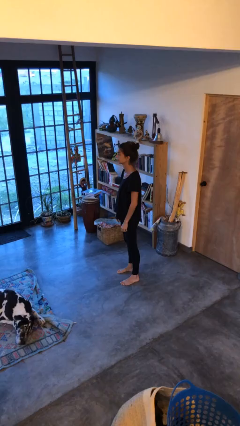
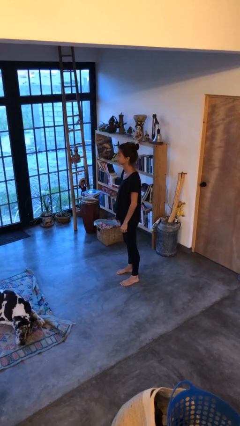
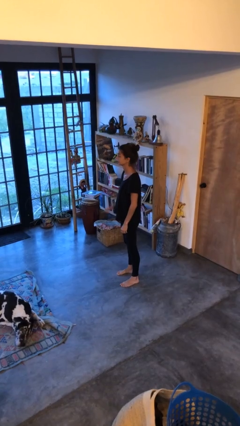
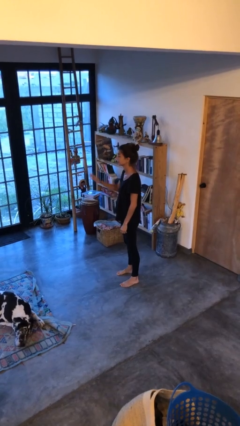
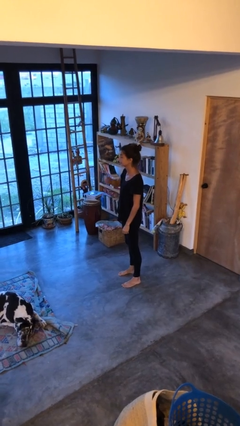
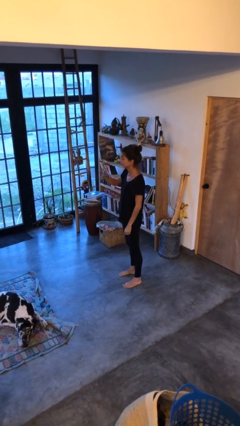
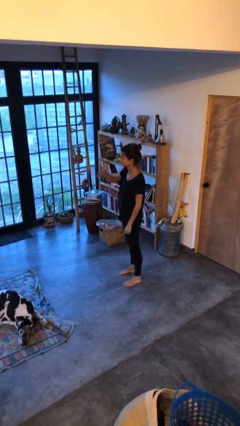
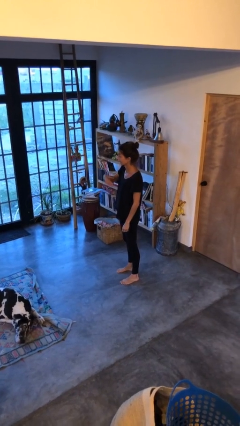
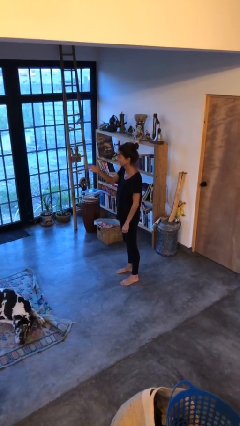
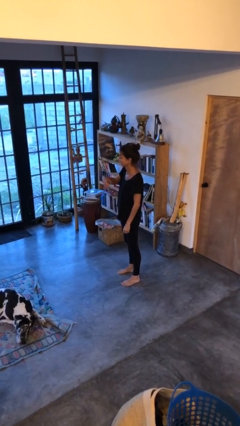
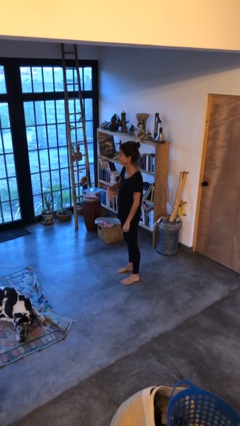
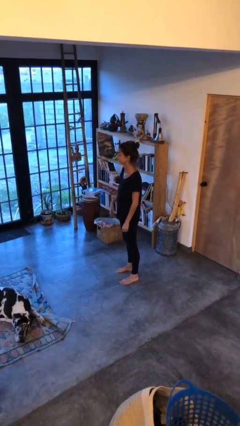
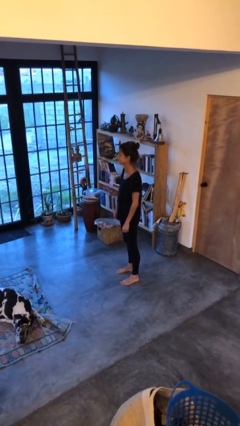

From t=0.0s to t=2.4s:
person gestures come here

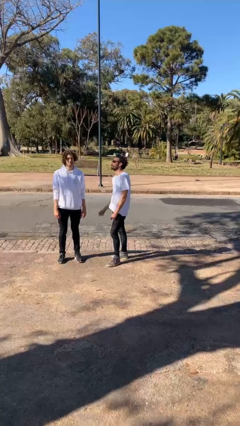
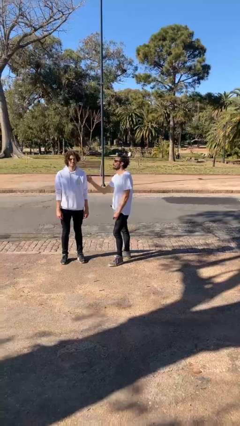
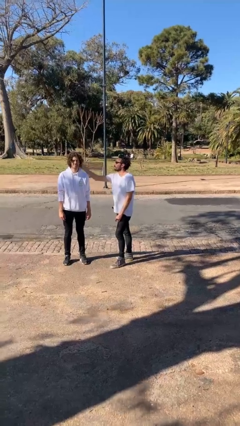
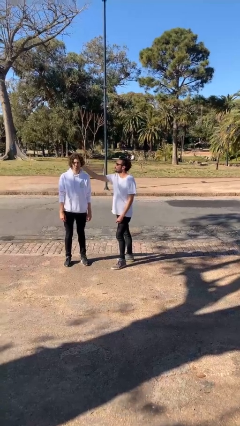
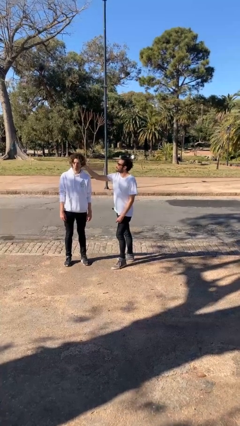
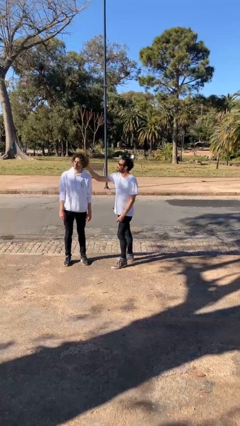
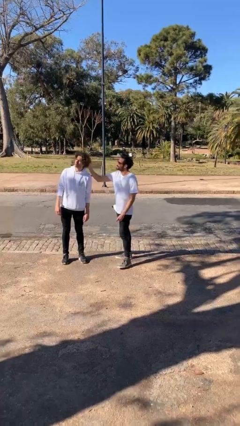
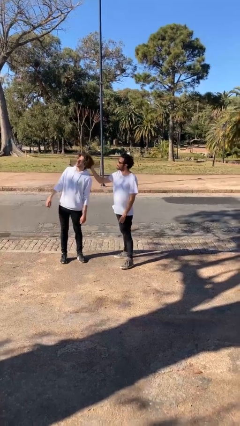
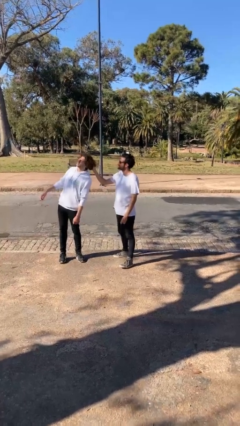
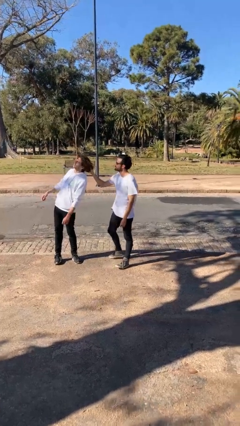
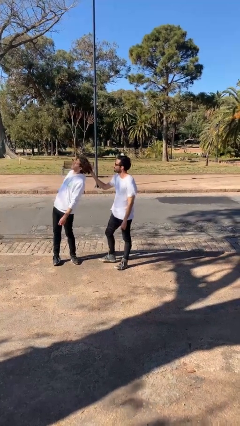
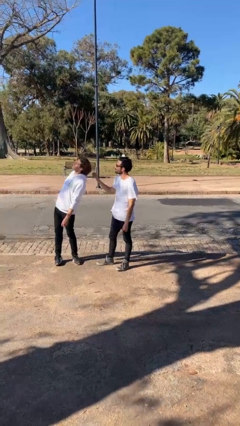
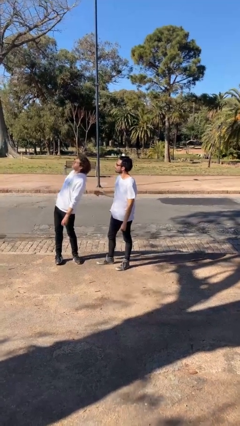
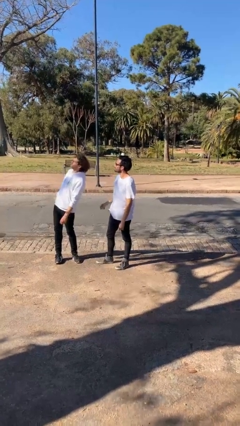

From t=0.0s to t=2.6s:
person grabs person by hair

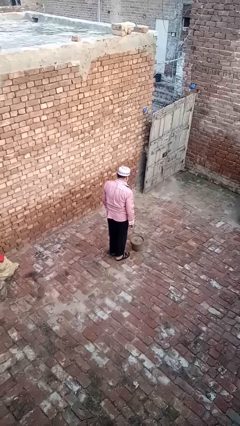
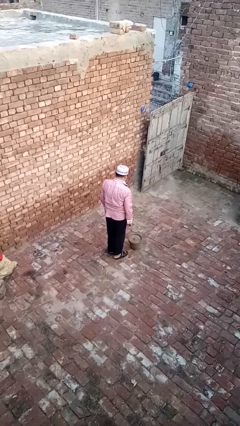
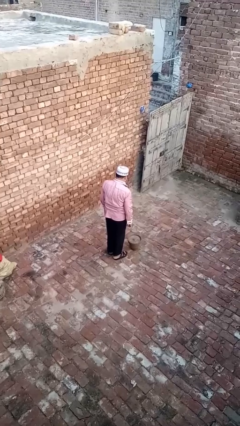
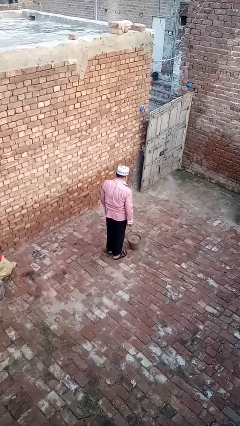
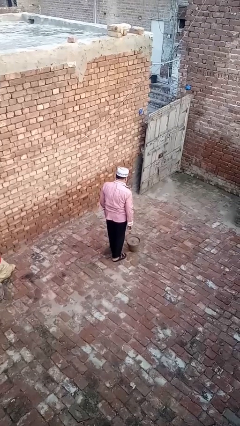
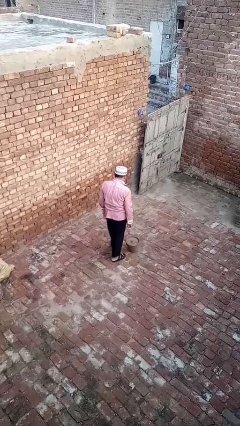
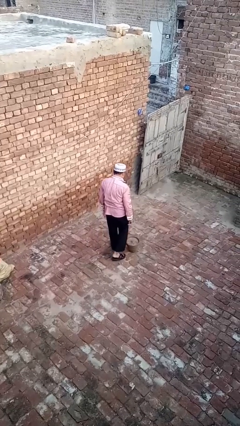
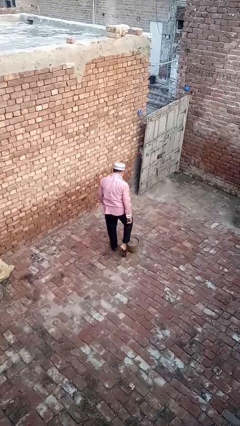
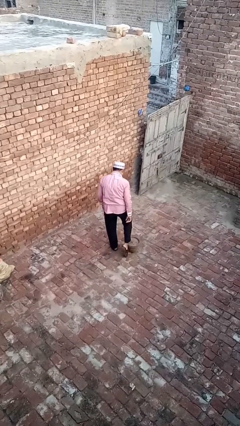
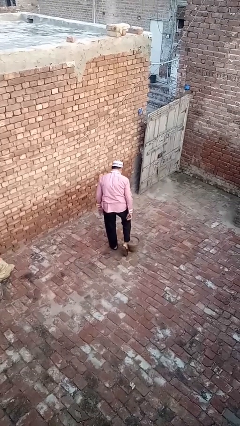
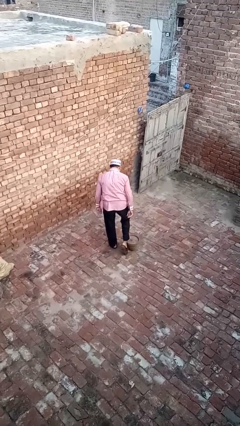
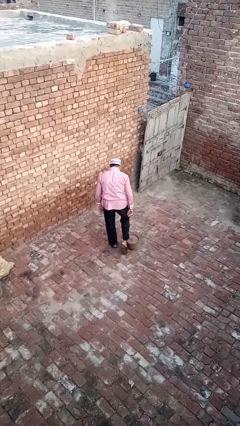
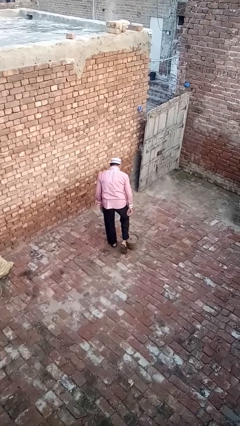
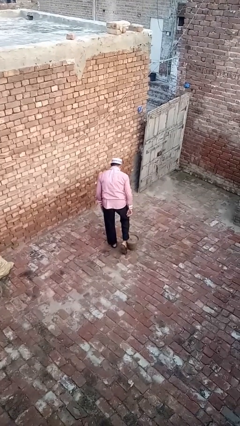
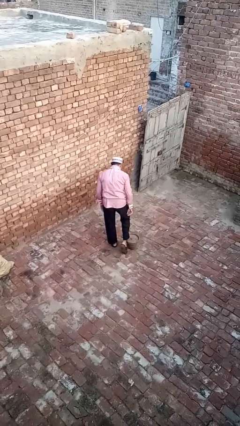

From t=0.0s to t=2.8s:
person trips on object on floor

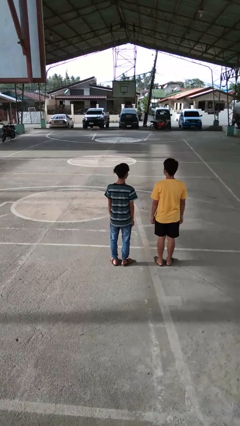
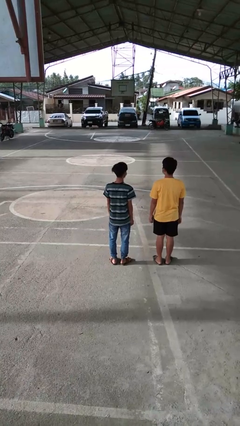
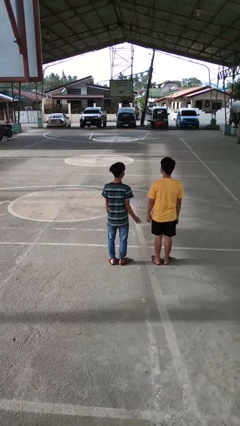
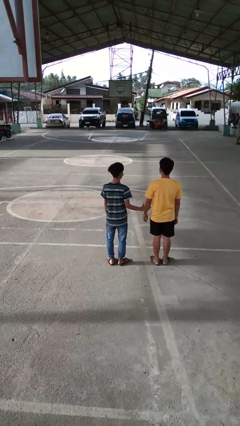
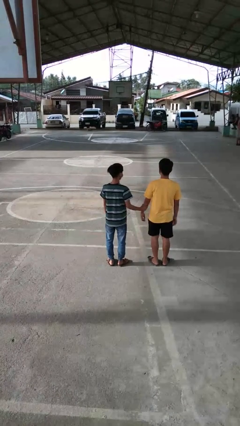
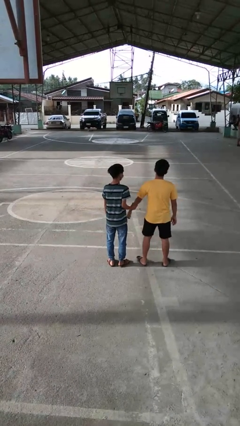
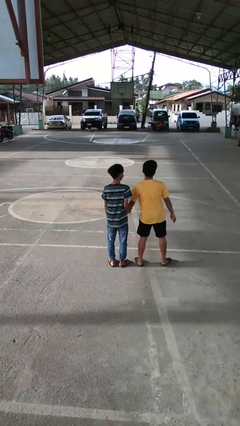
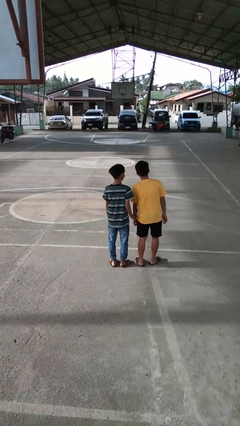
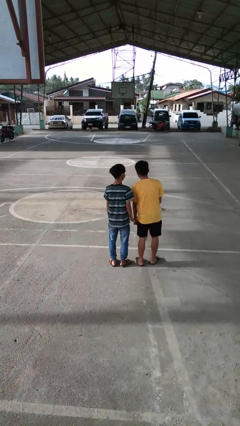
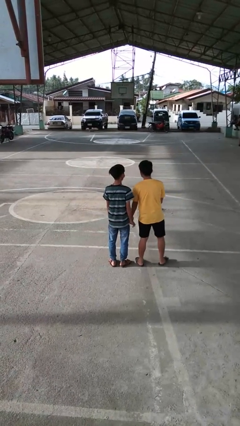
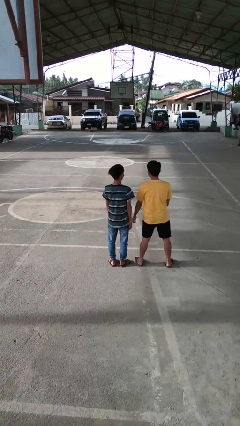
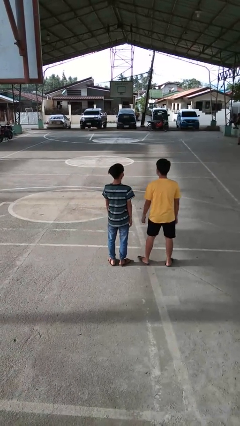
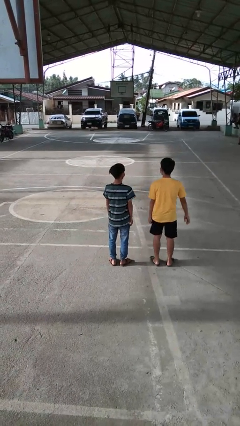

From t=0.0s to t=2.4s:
person grabs person by forearm

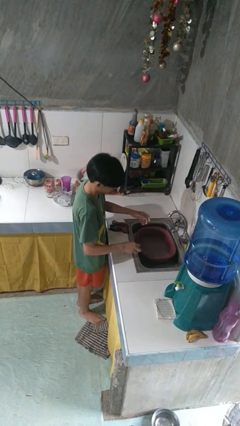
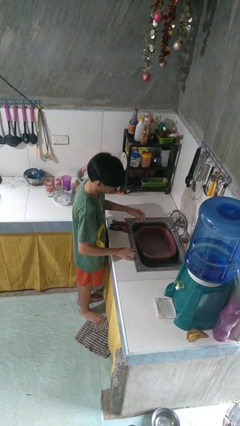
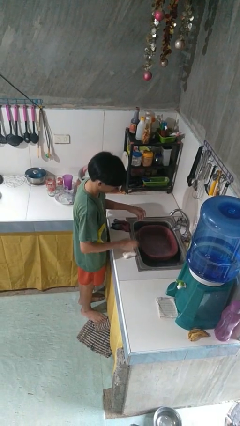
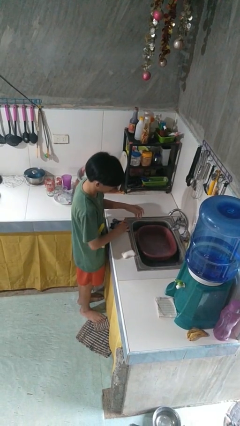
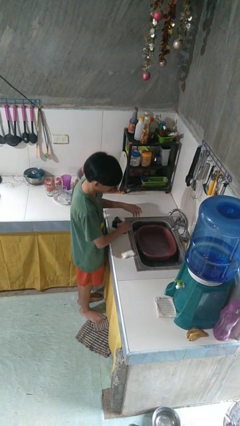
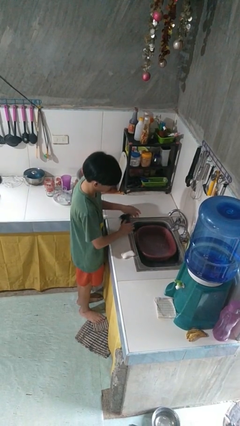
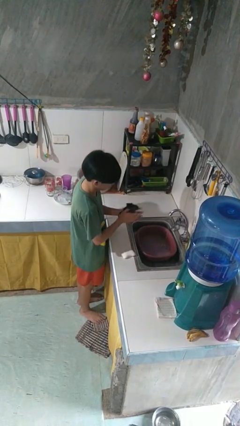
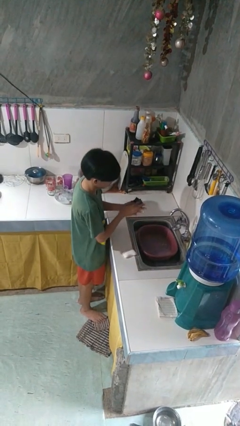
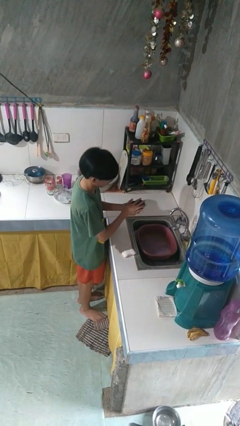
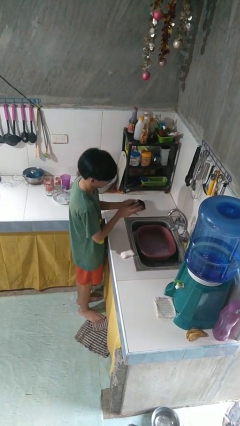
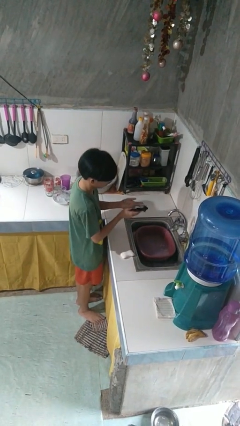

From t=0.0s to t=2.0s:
person dries hands with towel

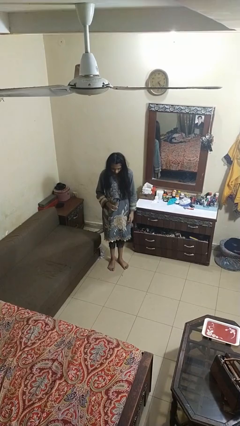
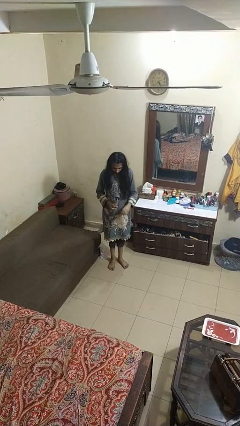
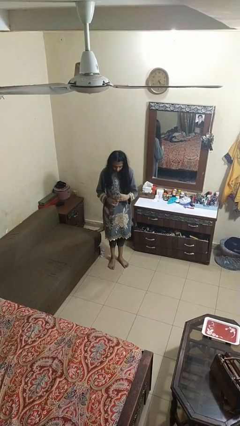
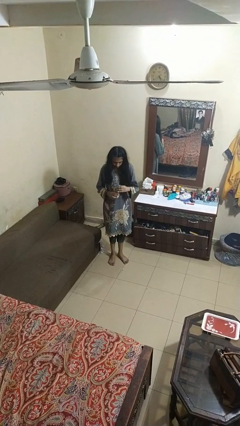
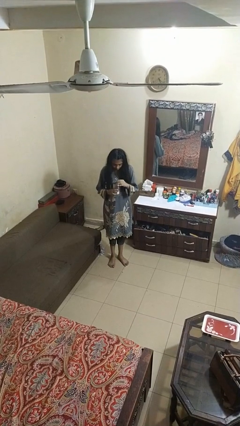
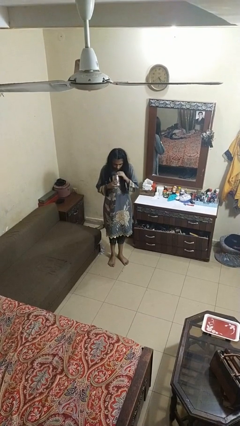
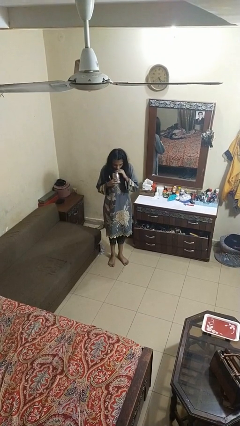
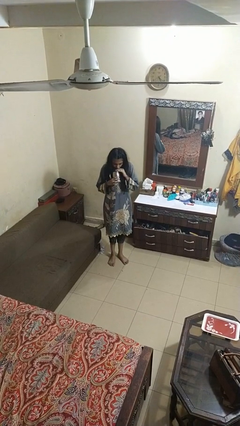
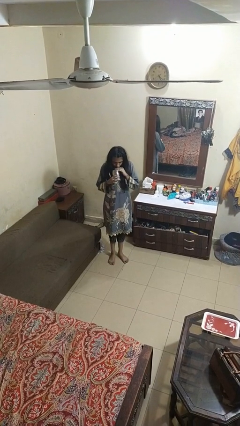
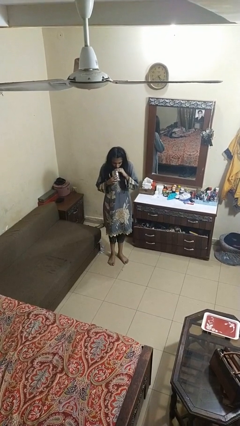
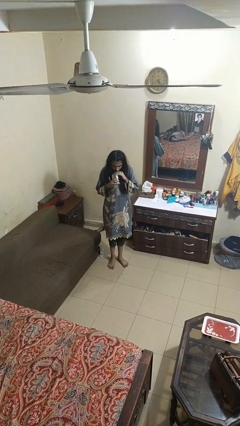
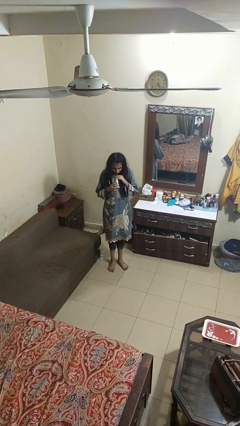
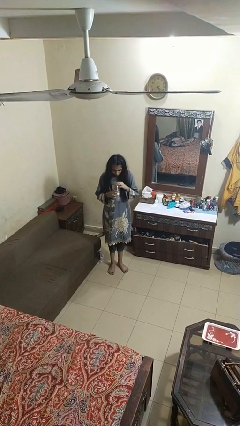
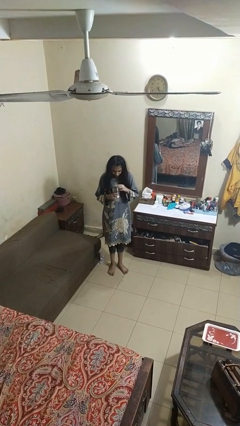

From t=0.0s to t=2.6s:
person drinks from straw

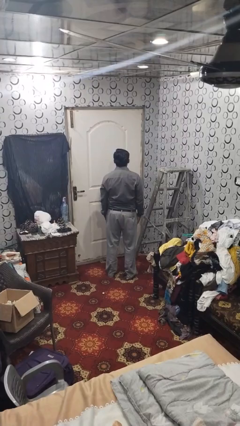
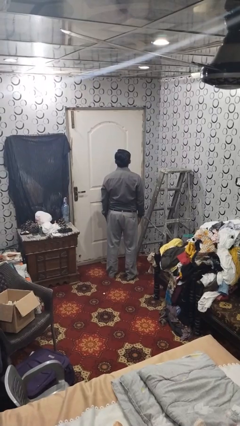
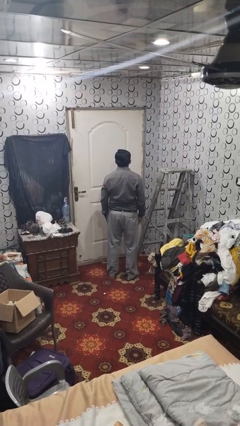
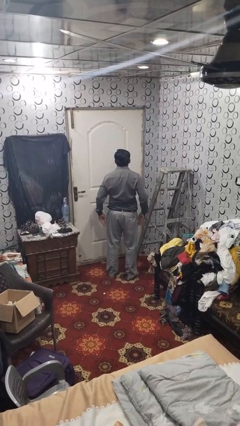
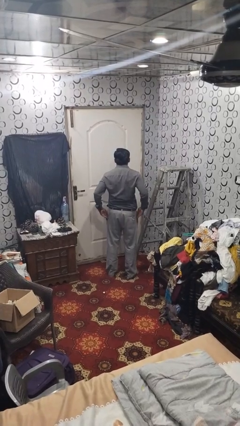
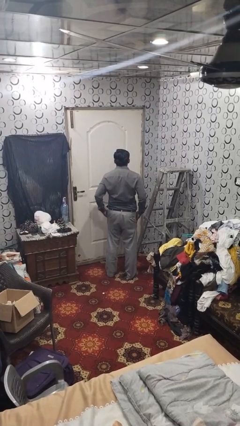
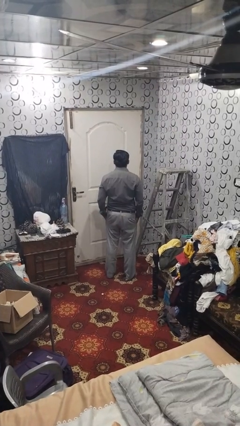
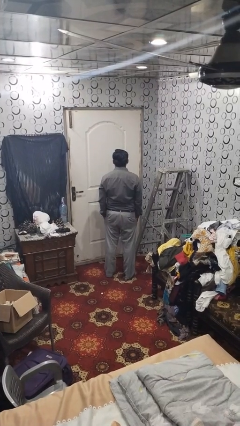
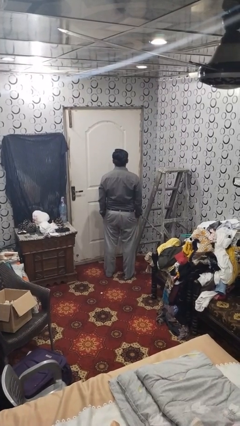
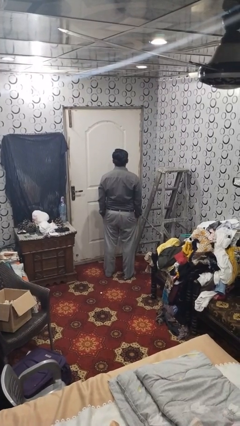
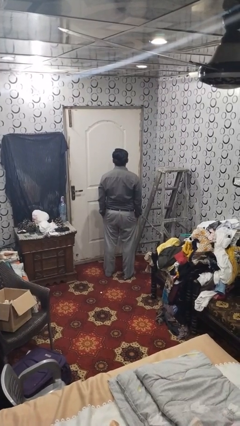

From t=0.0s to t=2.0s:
person puts hands in back pockets
